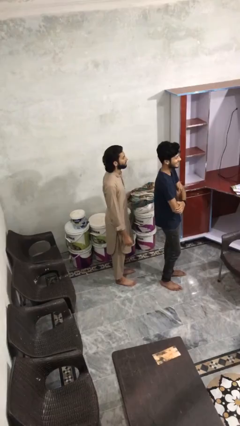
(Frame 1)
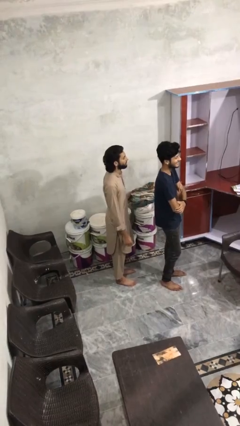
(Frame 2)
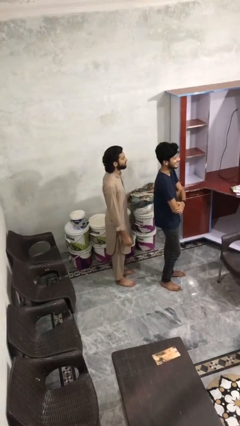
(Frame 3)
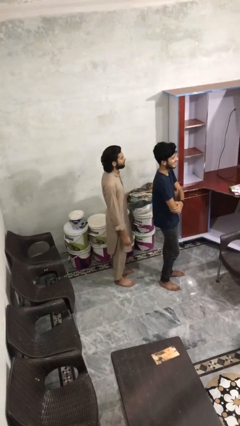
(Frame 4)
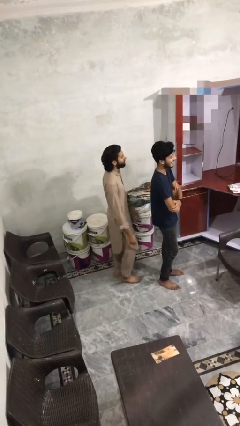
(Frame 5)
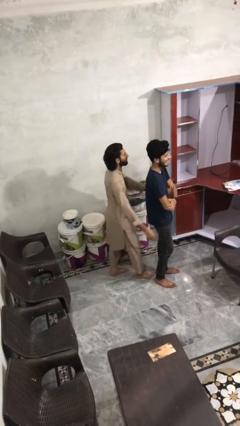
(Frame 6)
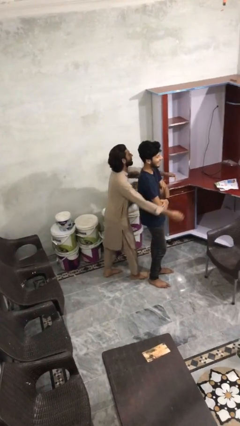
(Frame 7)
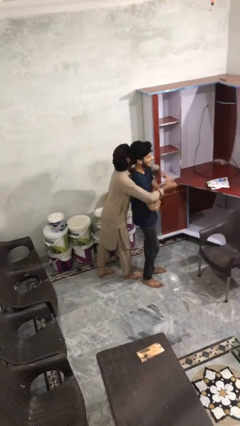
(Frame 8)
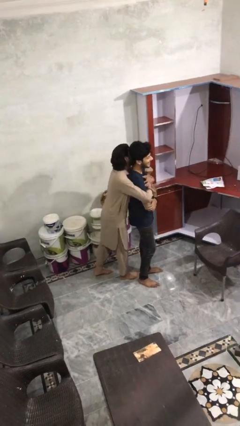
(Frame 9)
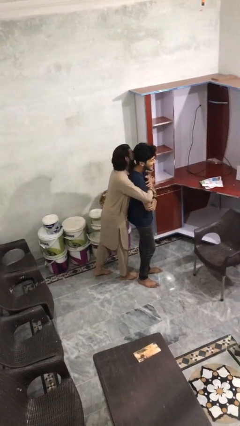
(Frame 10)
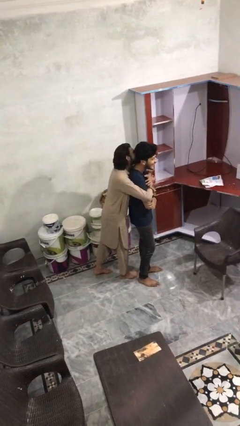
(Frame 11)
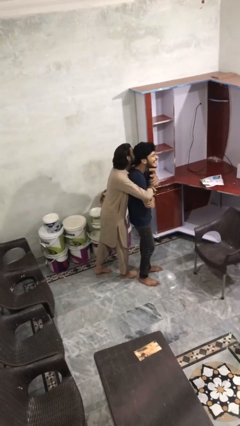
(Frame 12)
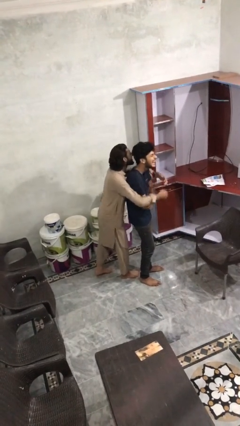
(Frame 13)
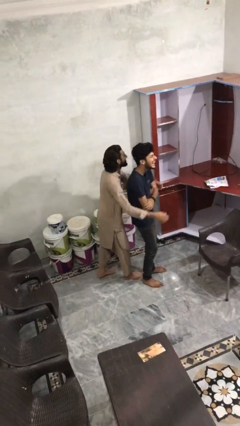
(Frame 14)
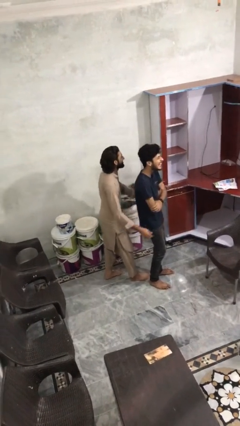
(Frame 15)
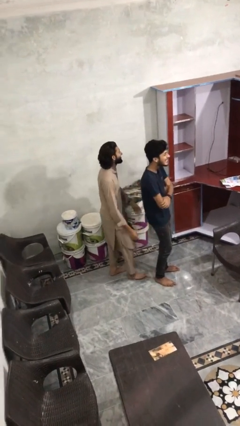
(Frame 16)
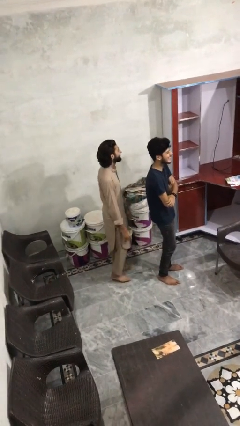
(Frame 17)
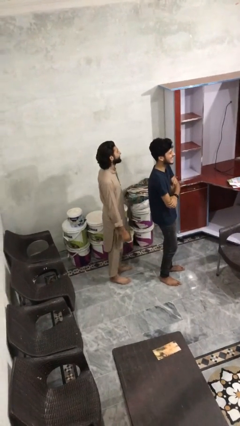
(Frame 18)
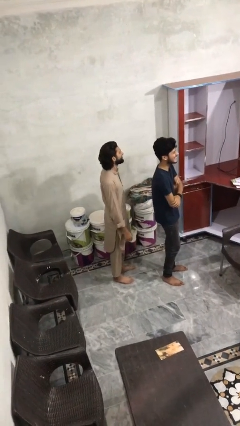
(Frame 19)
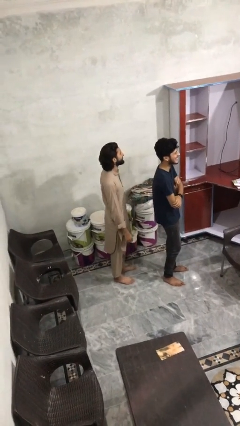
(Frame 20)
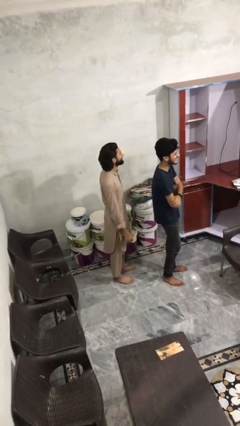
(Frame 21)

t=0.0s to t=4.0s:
person hugs person from behind

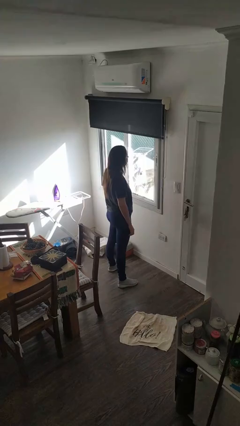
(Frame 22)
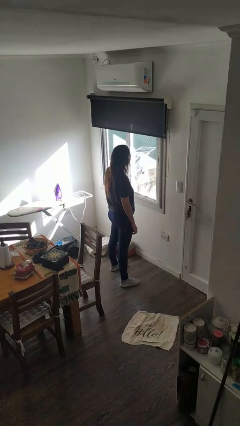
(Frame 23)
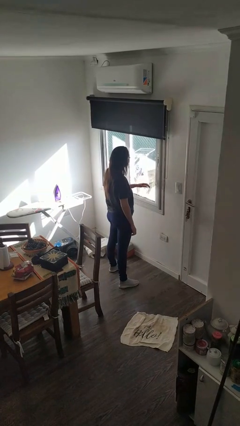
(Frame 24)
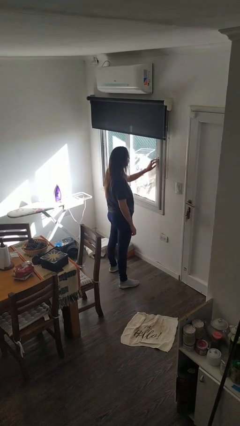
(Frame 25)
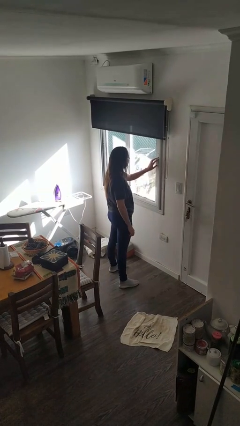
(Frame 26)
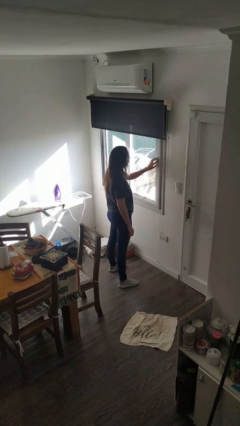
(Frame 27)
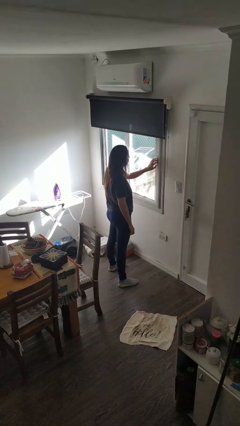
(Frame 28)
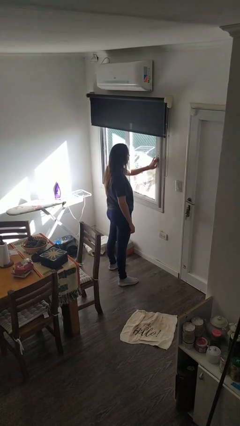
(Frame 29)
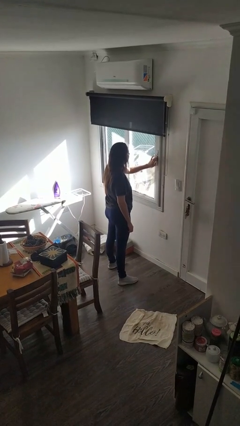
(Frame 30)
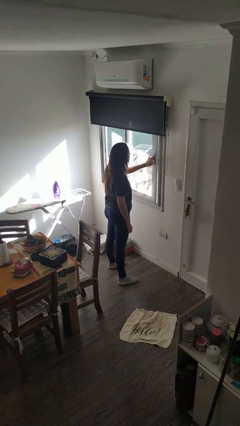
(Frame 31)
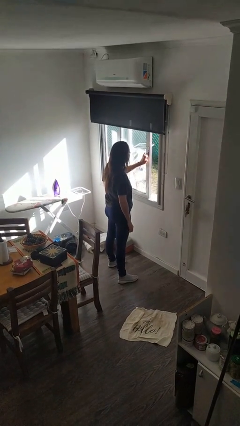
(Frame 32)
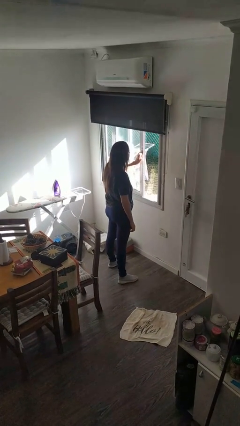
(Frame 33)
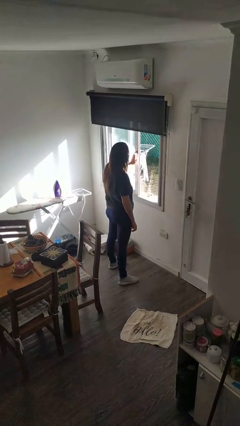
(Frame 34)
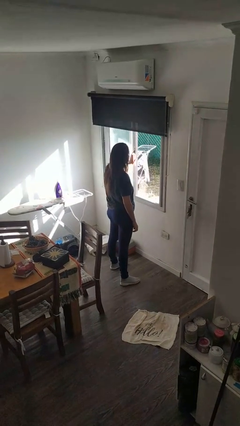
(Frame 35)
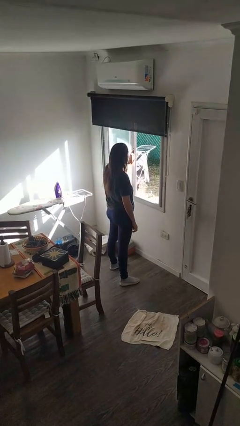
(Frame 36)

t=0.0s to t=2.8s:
person opens home window

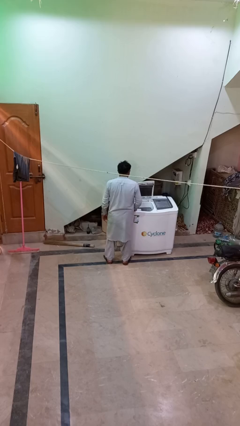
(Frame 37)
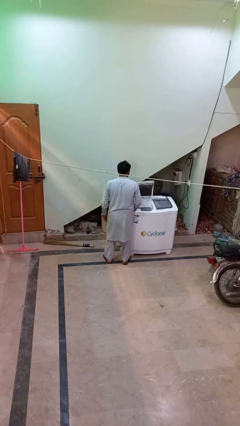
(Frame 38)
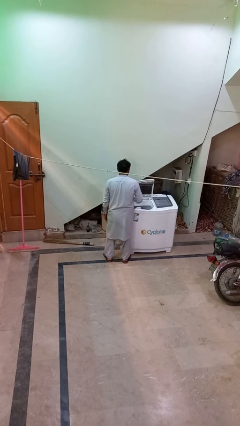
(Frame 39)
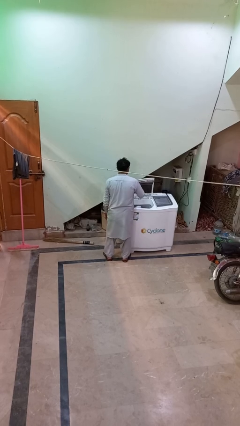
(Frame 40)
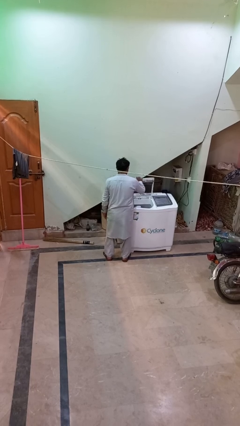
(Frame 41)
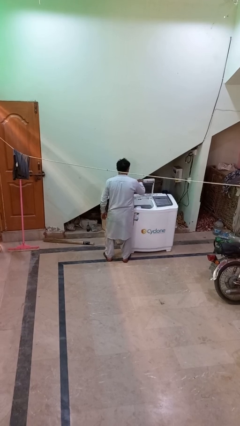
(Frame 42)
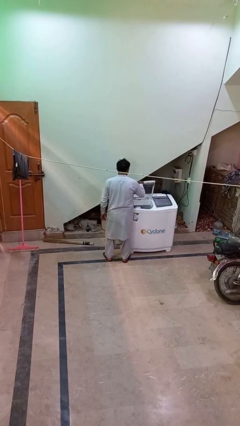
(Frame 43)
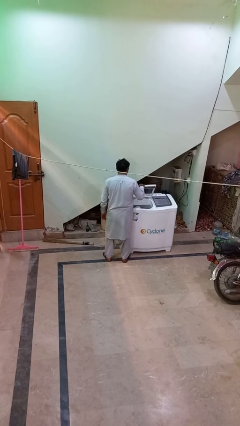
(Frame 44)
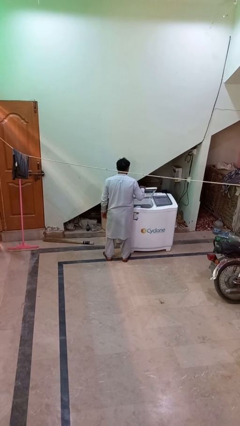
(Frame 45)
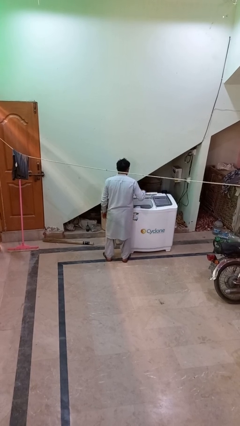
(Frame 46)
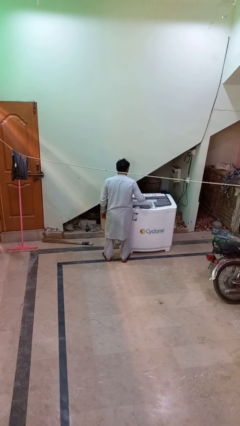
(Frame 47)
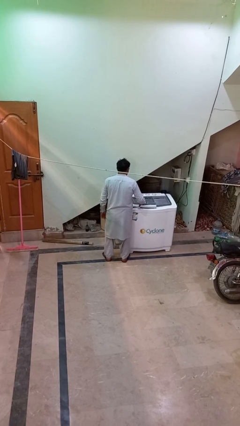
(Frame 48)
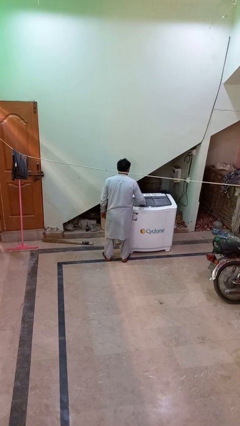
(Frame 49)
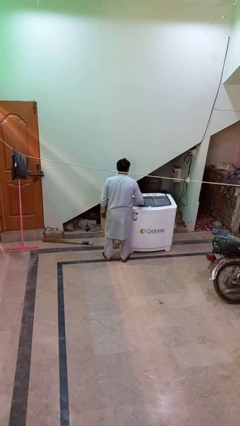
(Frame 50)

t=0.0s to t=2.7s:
person closes clothes washer

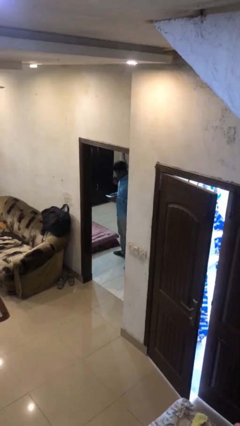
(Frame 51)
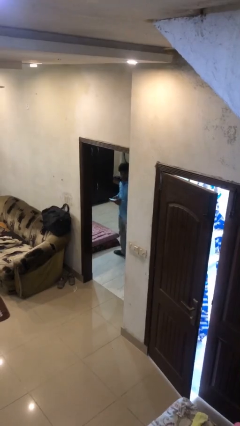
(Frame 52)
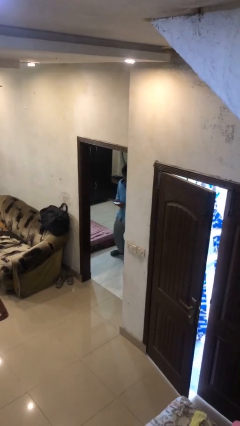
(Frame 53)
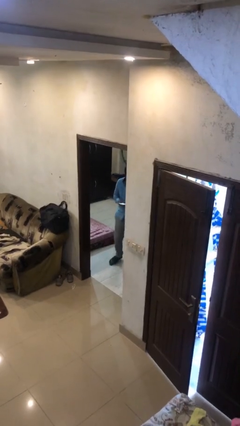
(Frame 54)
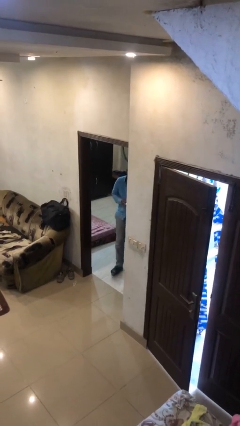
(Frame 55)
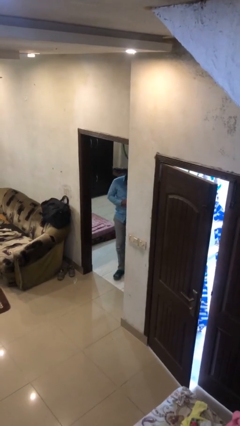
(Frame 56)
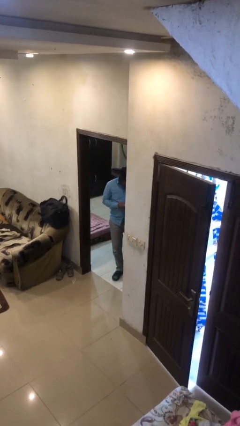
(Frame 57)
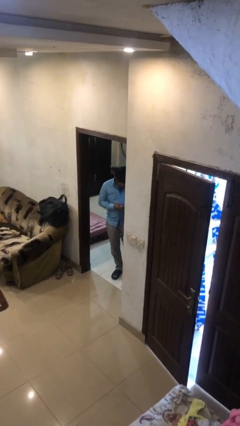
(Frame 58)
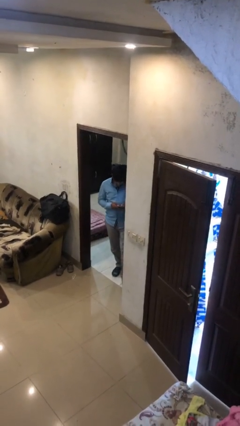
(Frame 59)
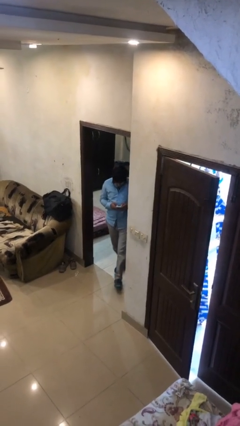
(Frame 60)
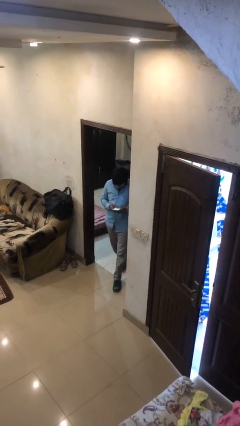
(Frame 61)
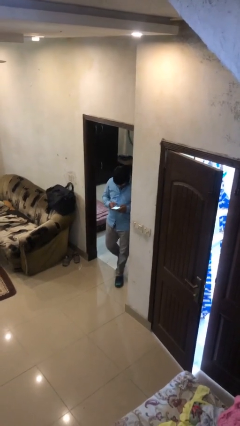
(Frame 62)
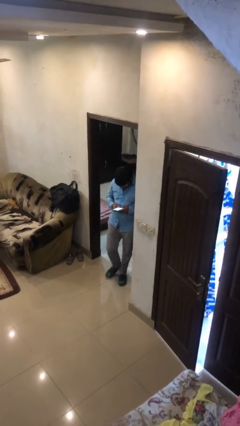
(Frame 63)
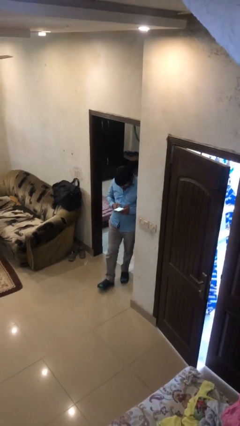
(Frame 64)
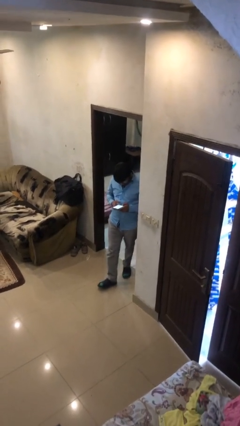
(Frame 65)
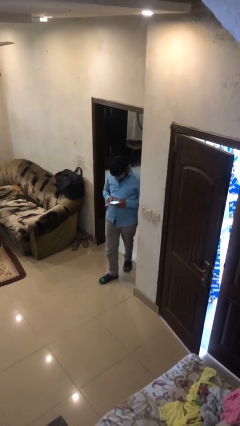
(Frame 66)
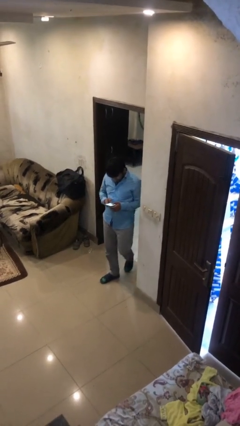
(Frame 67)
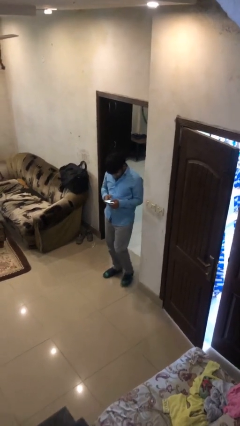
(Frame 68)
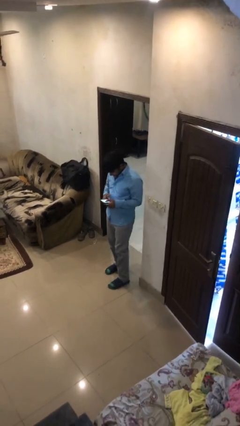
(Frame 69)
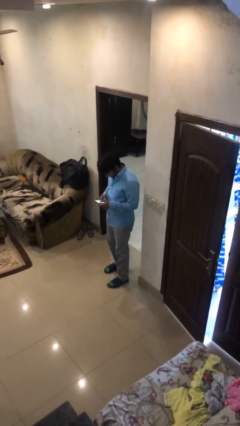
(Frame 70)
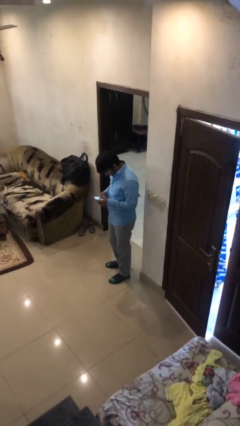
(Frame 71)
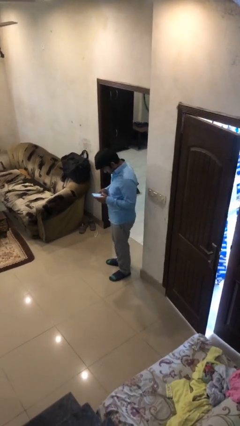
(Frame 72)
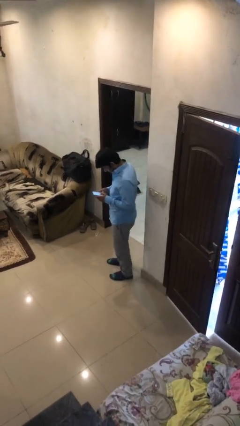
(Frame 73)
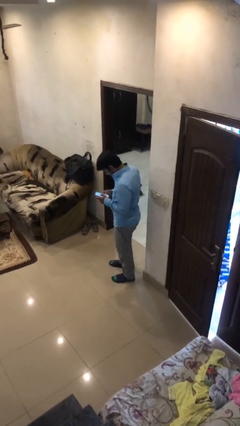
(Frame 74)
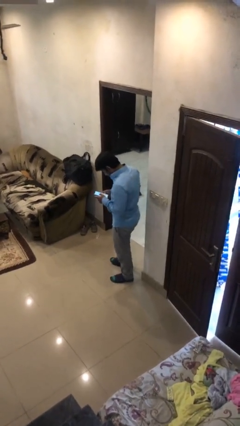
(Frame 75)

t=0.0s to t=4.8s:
person enters scene through structure

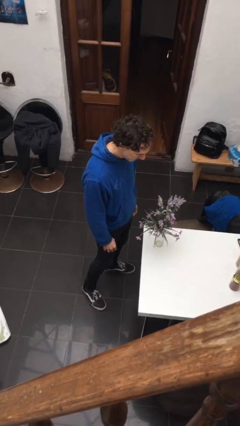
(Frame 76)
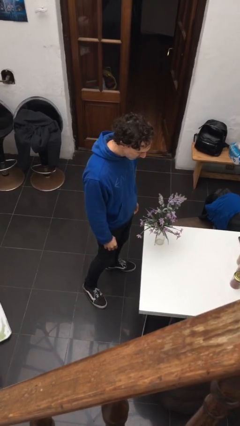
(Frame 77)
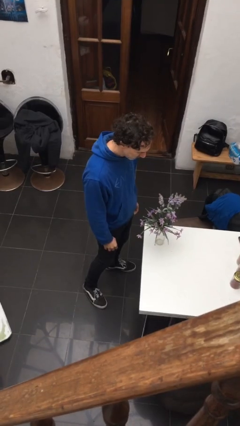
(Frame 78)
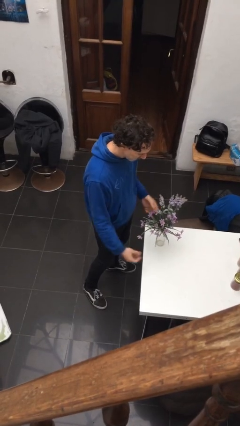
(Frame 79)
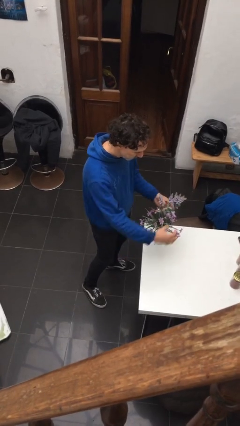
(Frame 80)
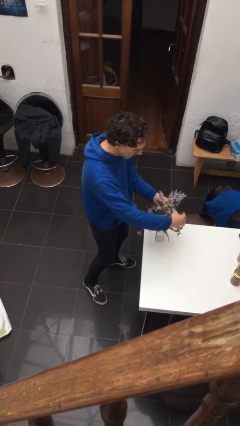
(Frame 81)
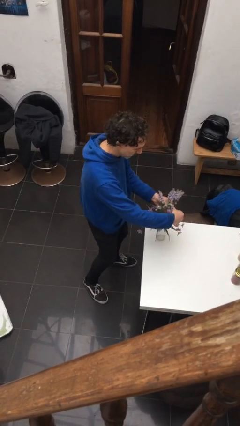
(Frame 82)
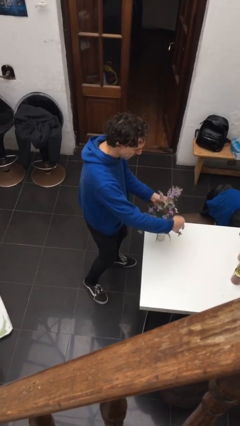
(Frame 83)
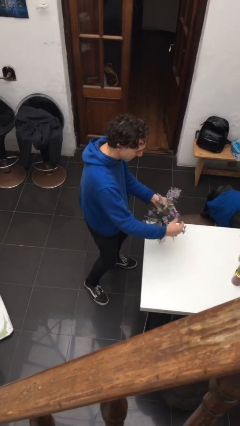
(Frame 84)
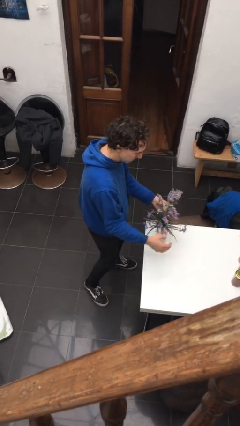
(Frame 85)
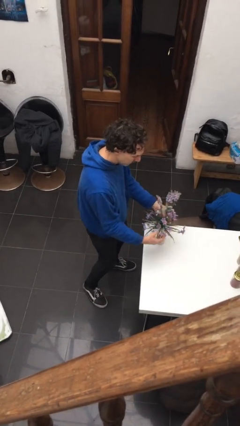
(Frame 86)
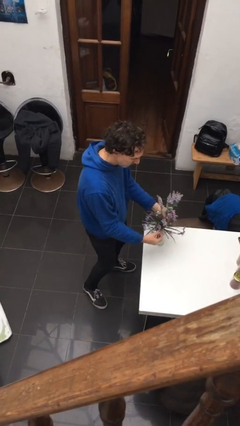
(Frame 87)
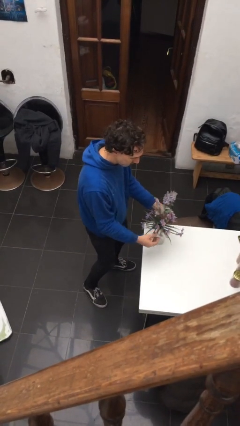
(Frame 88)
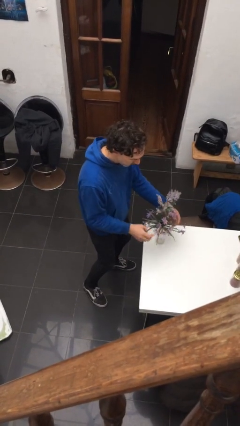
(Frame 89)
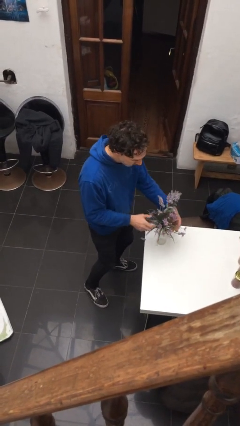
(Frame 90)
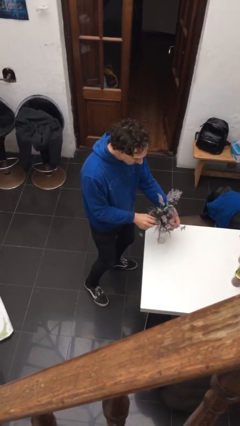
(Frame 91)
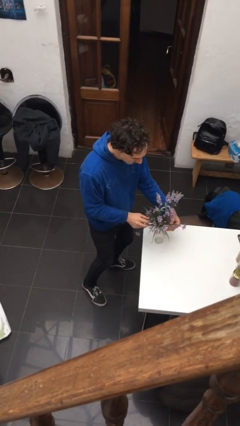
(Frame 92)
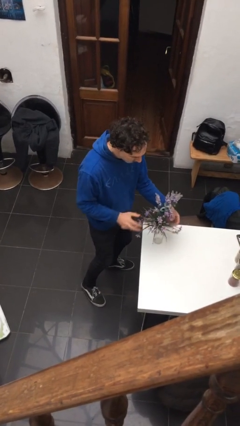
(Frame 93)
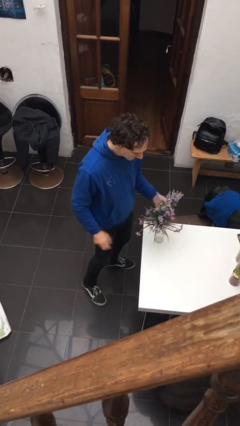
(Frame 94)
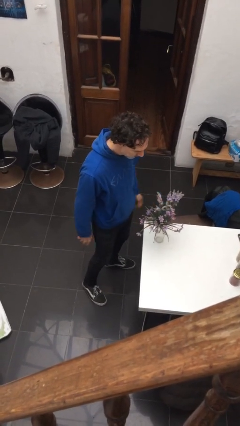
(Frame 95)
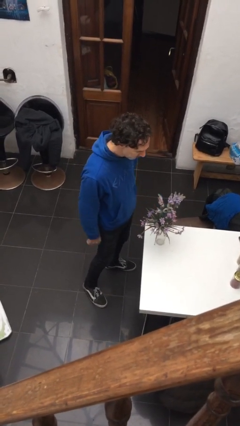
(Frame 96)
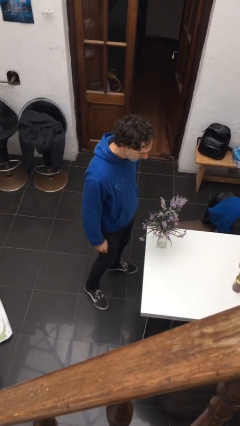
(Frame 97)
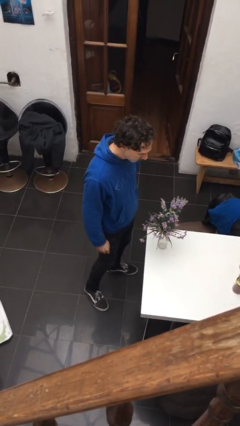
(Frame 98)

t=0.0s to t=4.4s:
person arranges flowers in vase
